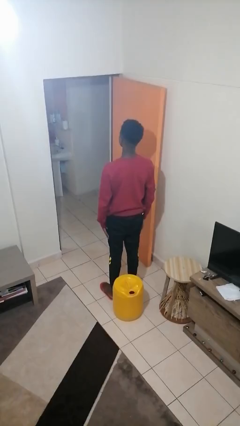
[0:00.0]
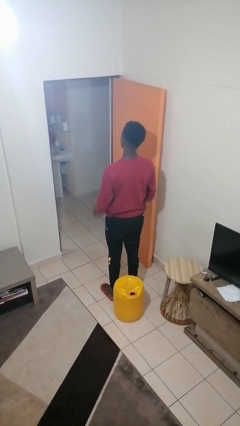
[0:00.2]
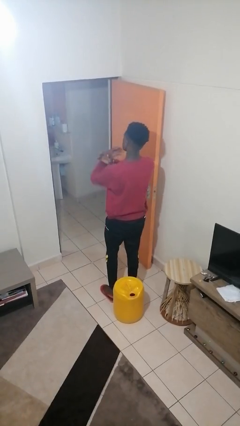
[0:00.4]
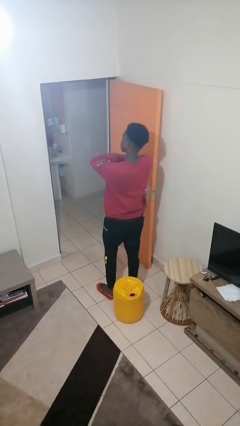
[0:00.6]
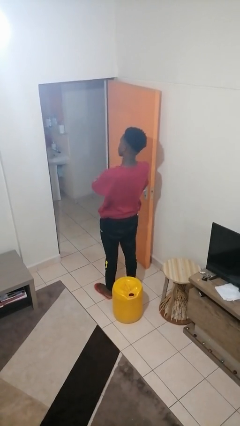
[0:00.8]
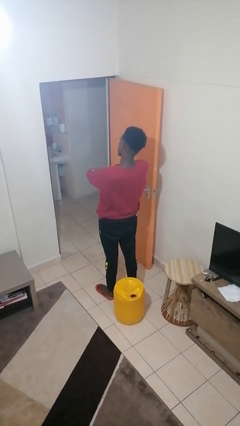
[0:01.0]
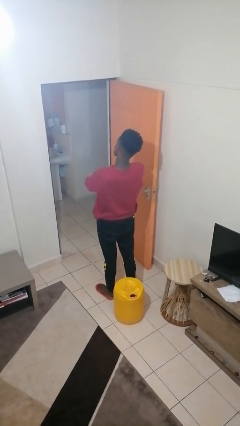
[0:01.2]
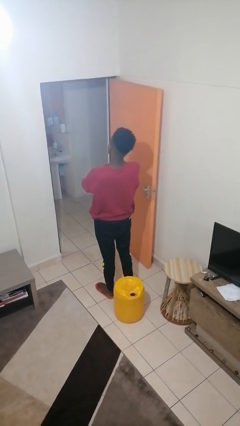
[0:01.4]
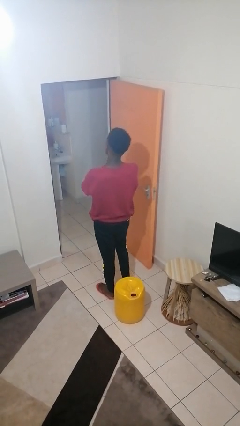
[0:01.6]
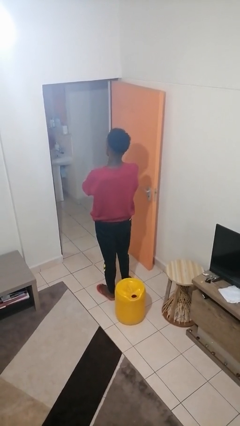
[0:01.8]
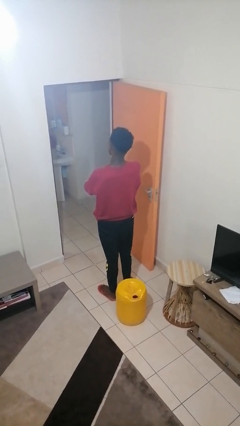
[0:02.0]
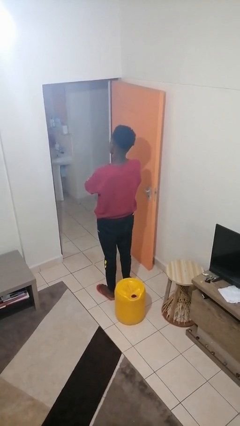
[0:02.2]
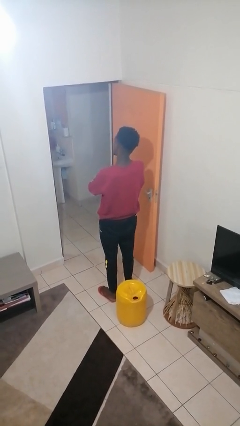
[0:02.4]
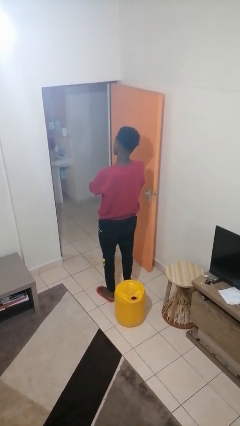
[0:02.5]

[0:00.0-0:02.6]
person crosses arms

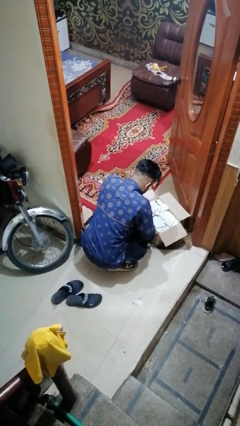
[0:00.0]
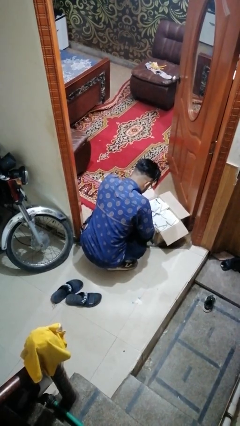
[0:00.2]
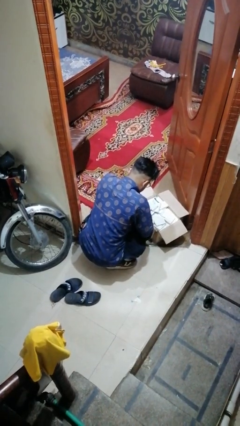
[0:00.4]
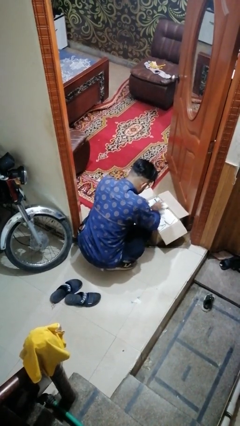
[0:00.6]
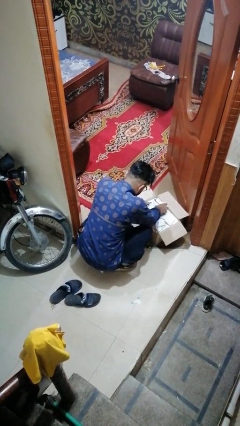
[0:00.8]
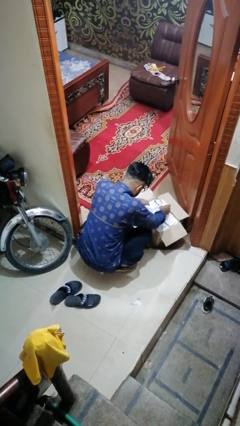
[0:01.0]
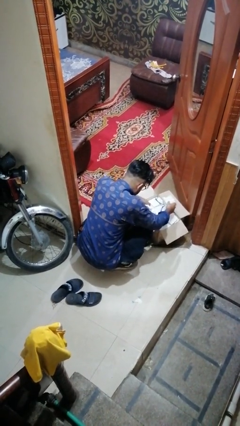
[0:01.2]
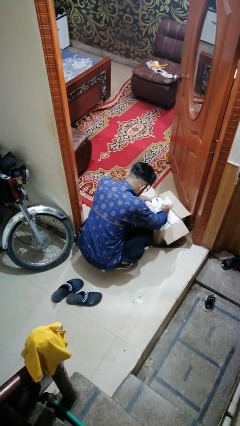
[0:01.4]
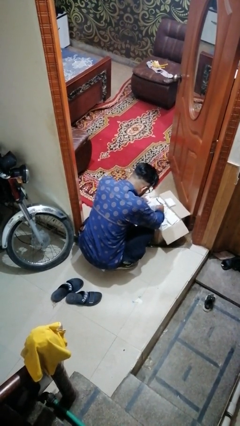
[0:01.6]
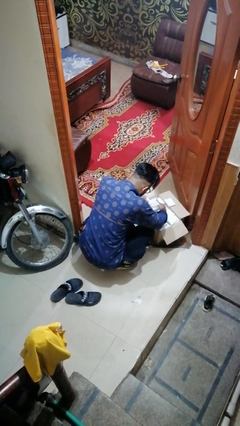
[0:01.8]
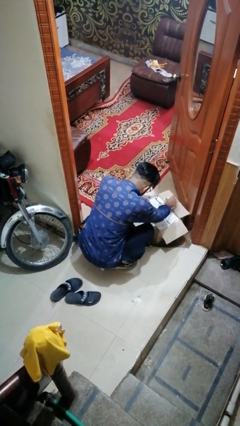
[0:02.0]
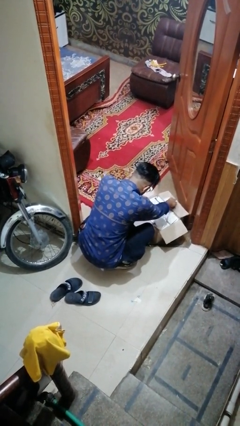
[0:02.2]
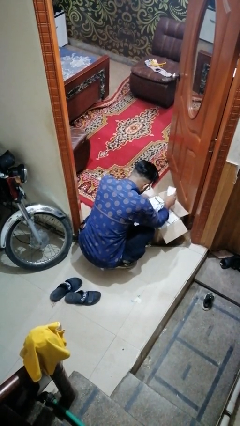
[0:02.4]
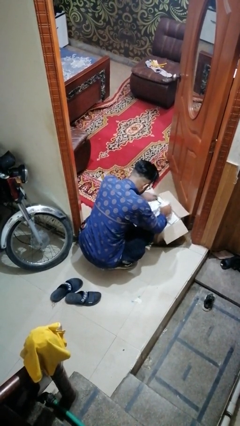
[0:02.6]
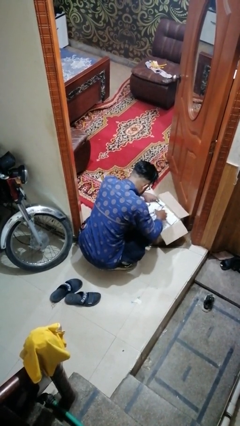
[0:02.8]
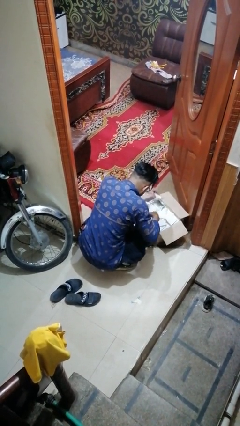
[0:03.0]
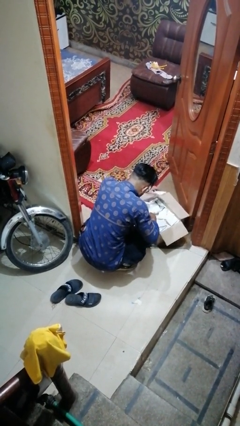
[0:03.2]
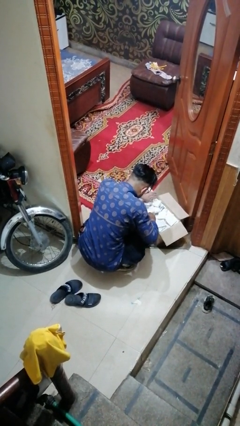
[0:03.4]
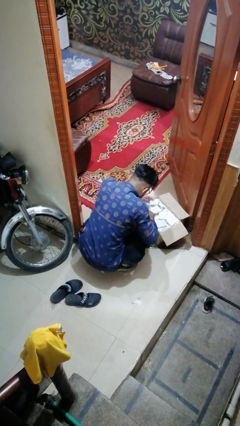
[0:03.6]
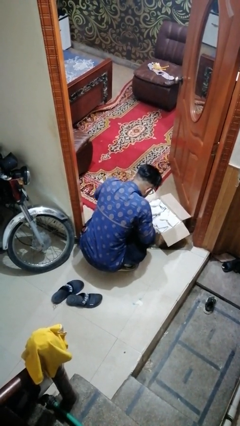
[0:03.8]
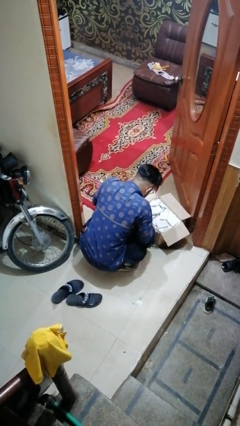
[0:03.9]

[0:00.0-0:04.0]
person searches in box

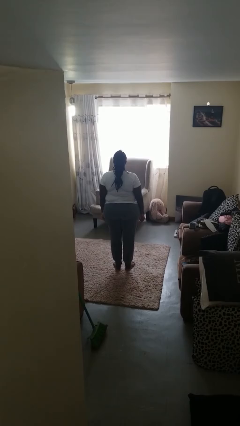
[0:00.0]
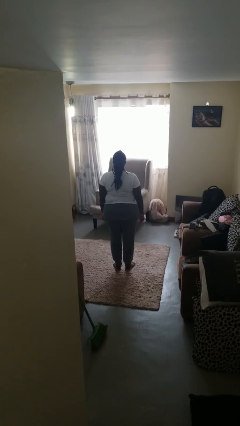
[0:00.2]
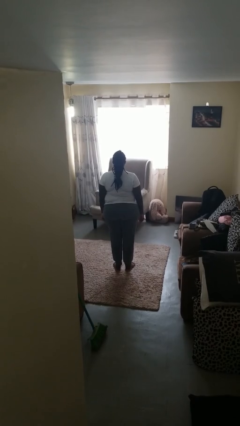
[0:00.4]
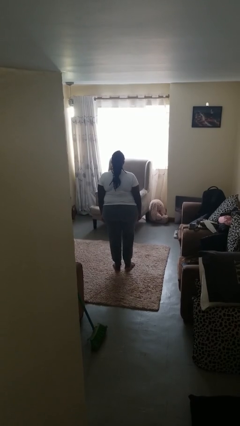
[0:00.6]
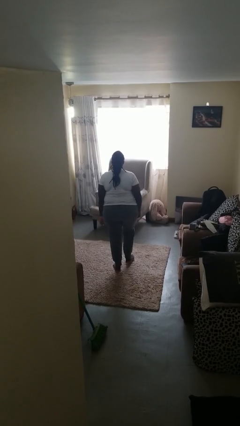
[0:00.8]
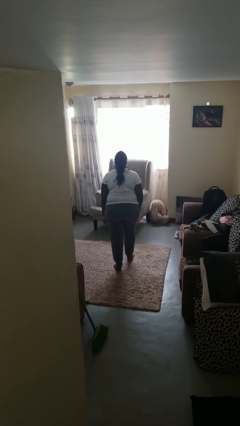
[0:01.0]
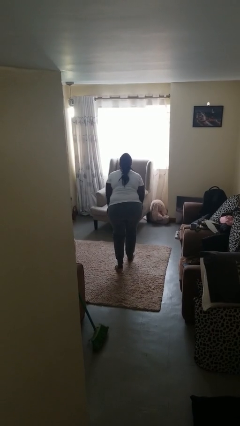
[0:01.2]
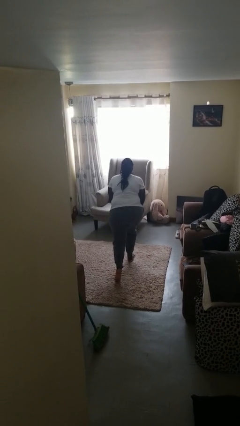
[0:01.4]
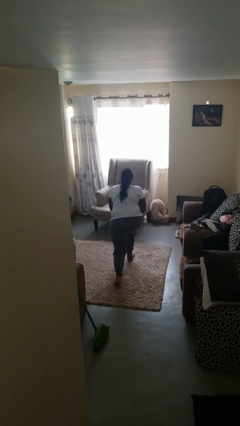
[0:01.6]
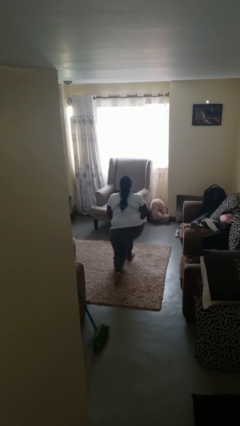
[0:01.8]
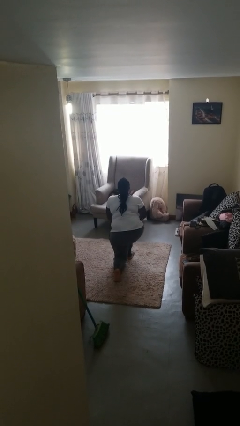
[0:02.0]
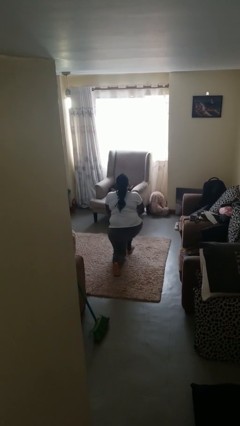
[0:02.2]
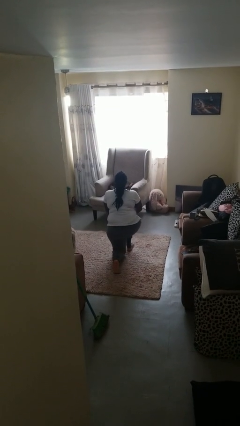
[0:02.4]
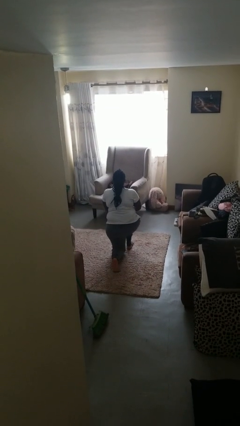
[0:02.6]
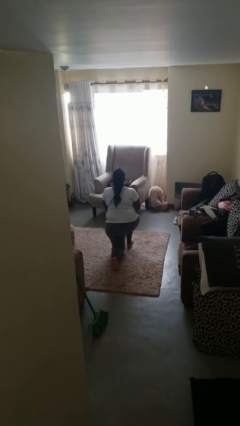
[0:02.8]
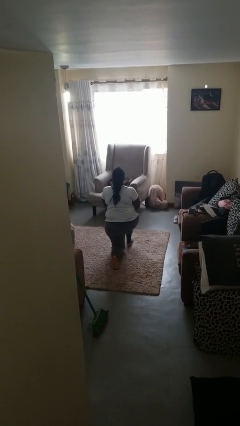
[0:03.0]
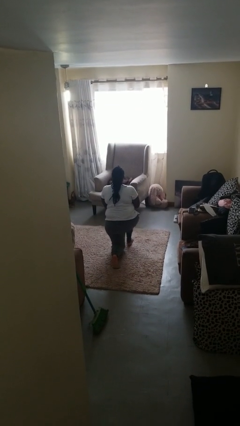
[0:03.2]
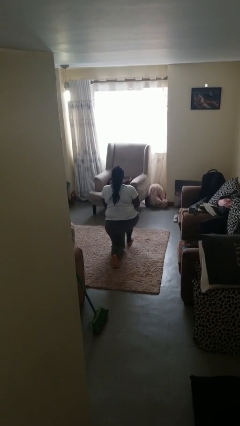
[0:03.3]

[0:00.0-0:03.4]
person kneels

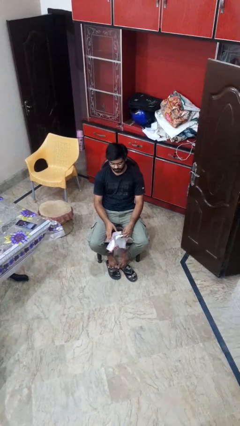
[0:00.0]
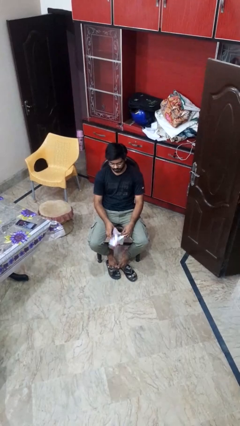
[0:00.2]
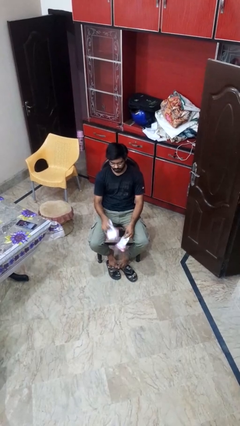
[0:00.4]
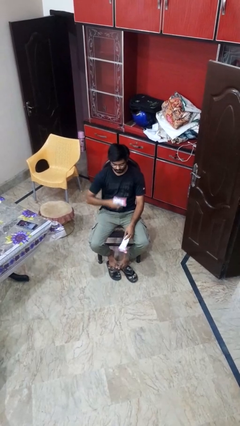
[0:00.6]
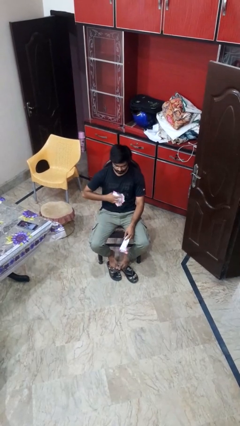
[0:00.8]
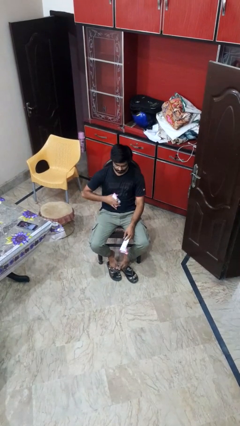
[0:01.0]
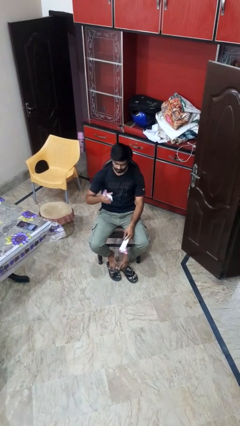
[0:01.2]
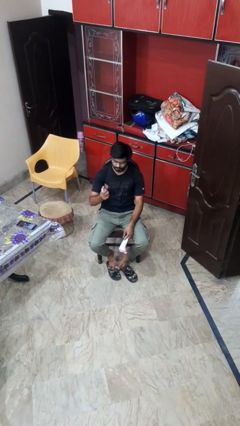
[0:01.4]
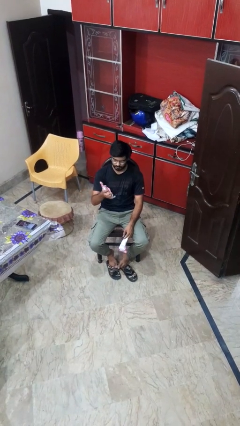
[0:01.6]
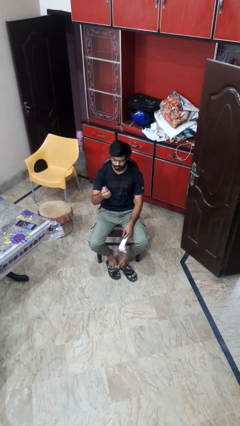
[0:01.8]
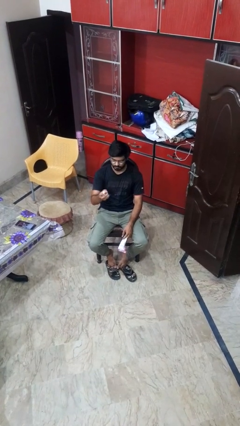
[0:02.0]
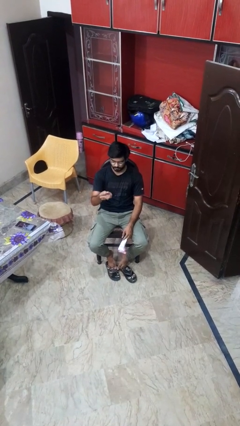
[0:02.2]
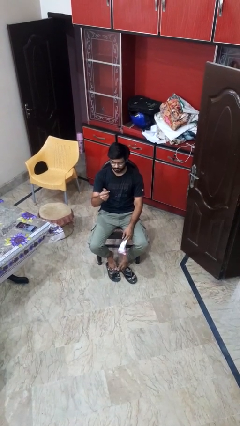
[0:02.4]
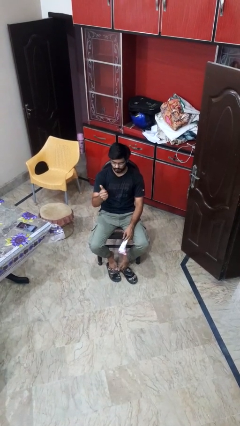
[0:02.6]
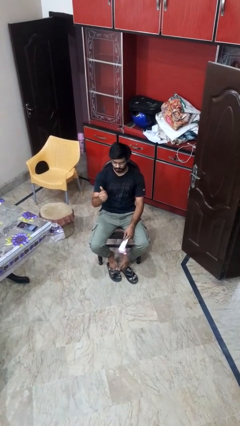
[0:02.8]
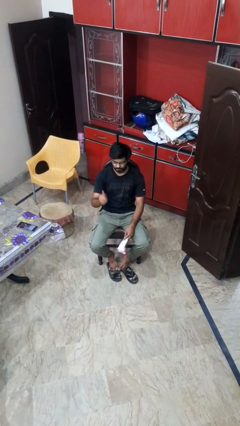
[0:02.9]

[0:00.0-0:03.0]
person crumples paper

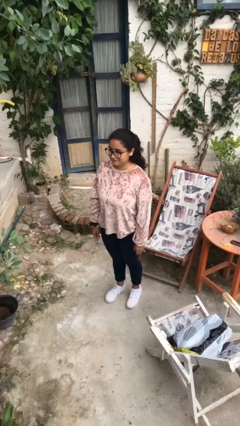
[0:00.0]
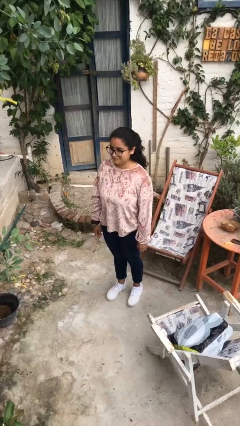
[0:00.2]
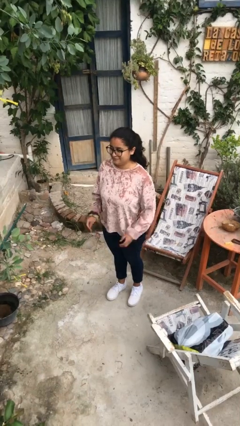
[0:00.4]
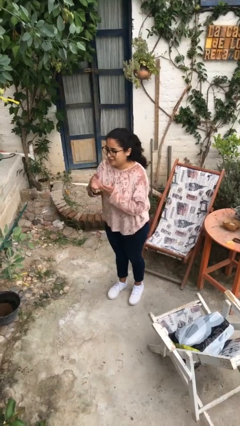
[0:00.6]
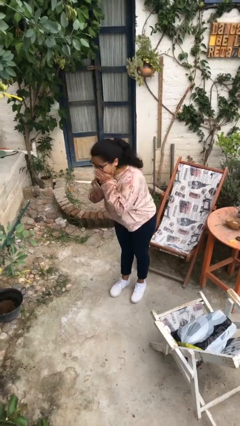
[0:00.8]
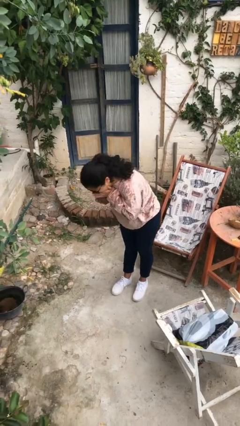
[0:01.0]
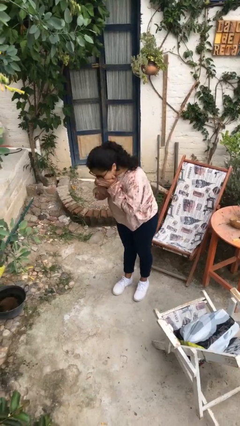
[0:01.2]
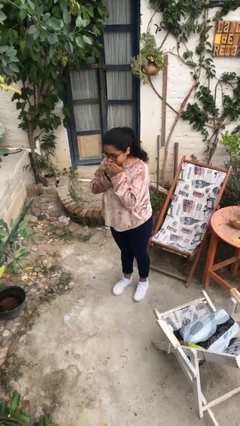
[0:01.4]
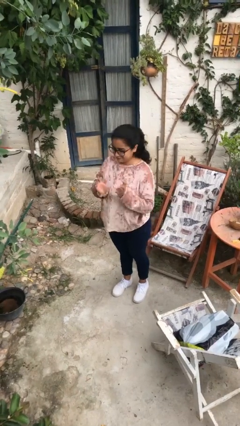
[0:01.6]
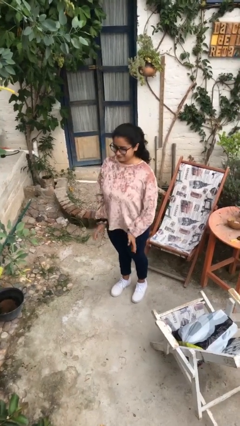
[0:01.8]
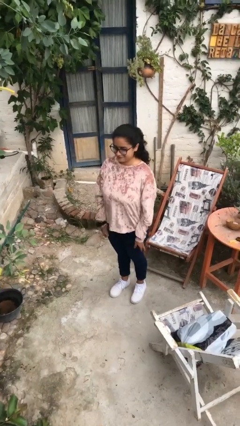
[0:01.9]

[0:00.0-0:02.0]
person sneezes into hand

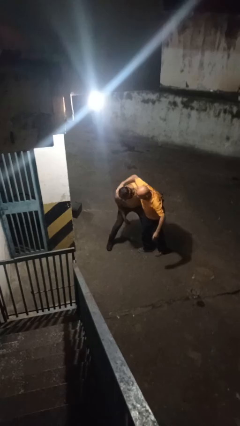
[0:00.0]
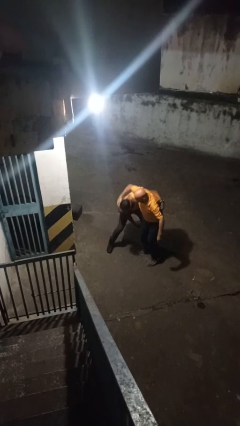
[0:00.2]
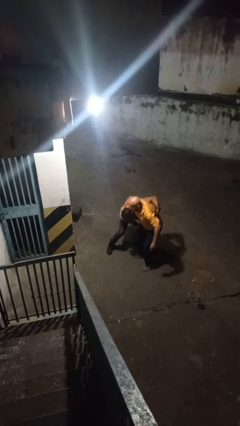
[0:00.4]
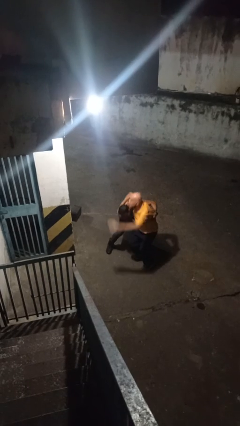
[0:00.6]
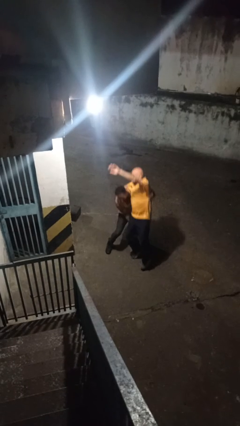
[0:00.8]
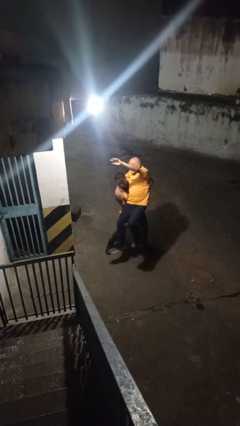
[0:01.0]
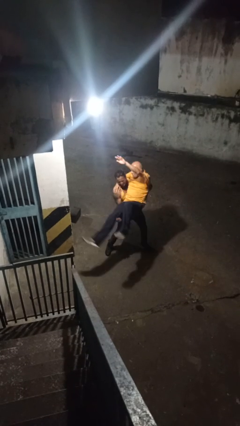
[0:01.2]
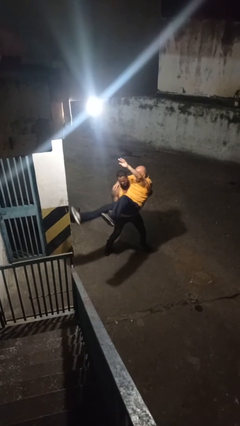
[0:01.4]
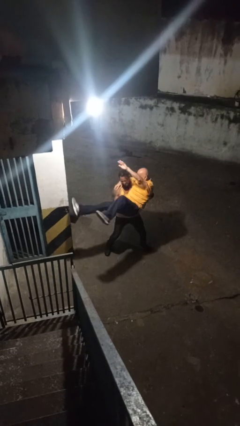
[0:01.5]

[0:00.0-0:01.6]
person picks up person

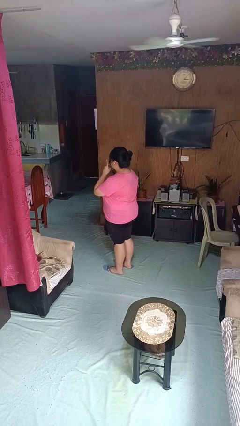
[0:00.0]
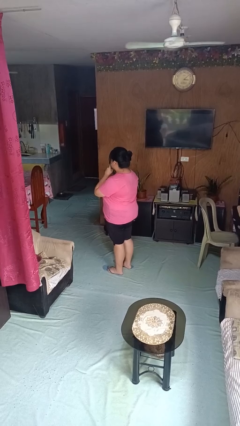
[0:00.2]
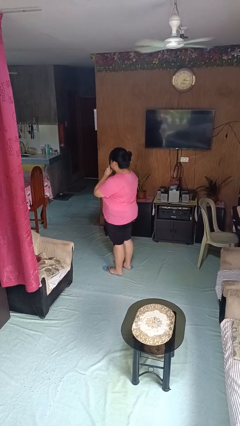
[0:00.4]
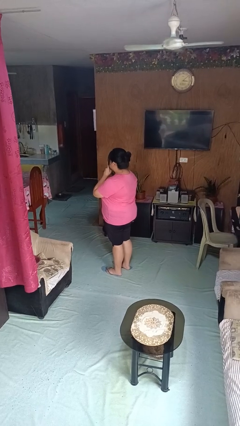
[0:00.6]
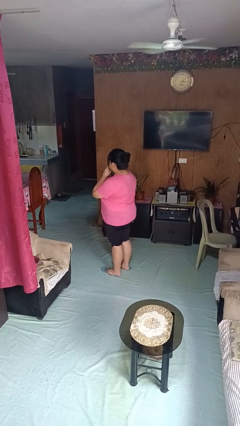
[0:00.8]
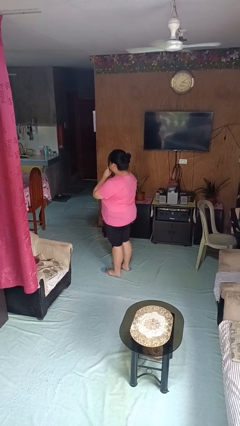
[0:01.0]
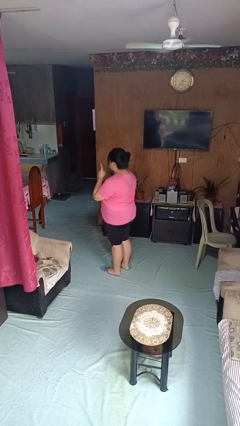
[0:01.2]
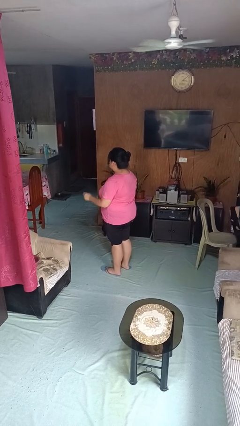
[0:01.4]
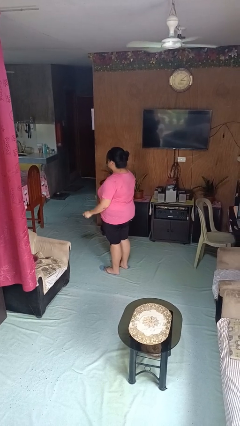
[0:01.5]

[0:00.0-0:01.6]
person gestures be quiet
